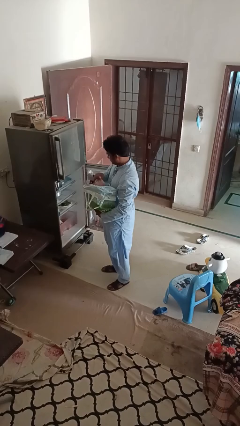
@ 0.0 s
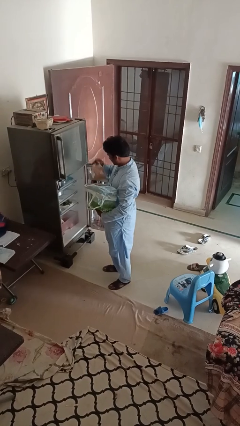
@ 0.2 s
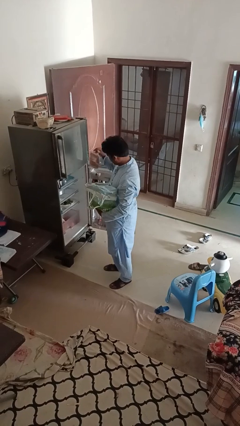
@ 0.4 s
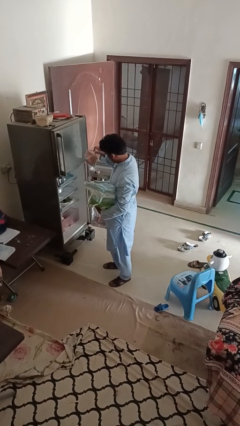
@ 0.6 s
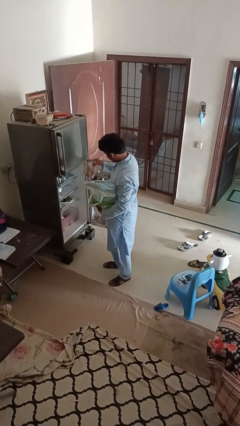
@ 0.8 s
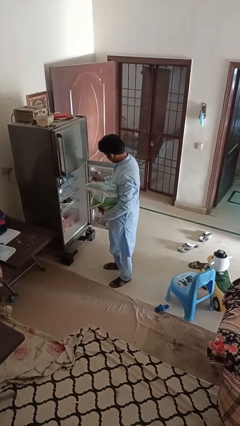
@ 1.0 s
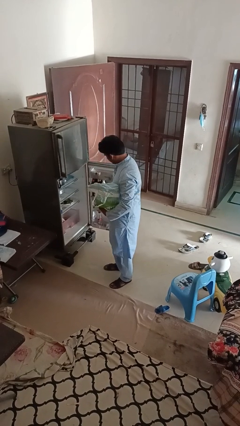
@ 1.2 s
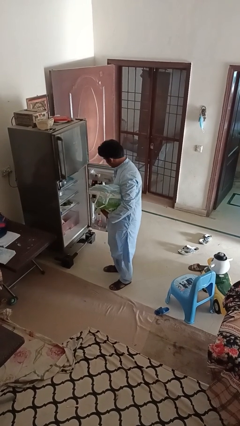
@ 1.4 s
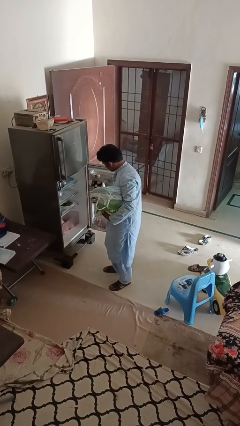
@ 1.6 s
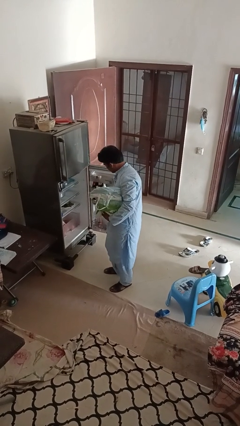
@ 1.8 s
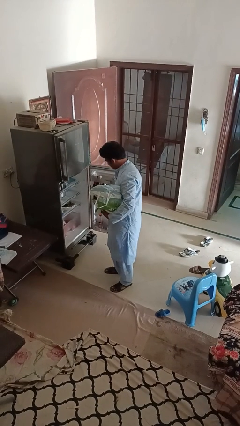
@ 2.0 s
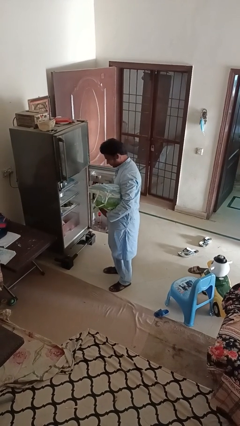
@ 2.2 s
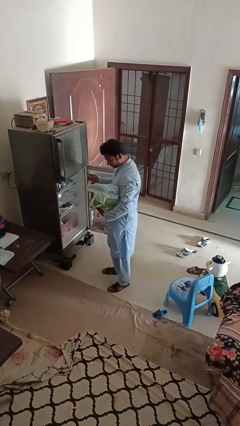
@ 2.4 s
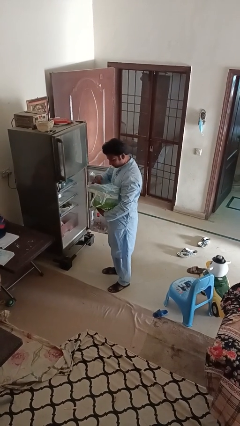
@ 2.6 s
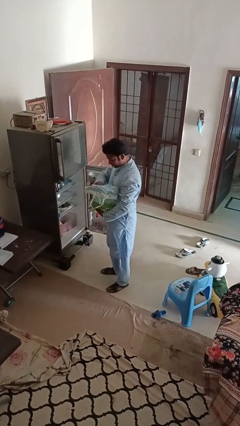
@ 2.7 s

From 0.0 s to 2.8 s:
person loads groceries into refrigerator

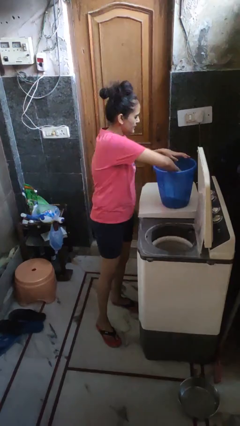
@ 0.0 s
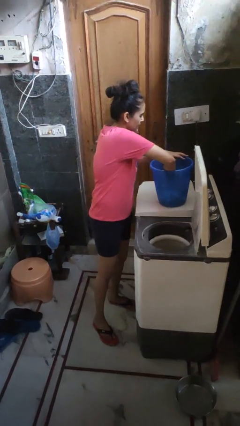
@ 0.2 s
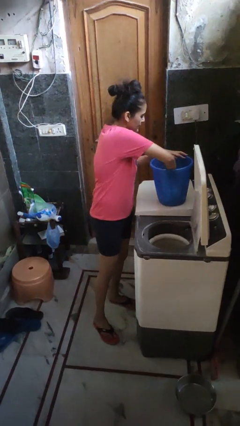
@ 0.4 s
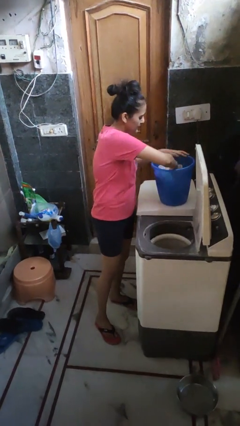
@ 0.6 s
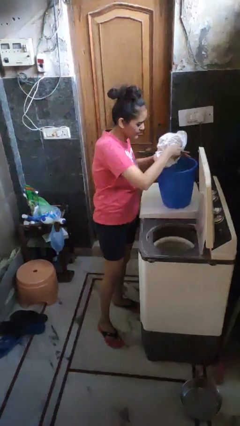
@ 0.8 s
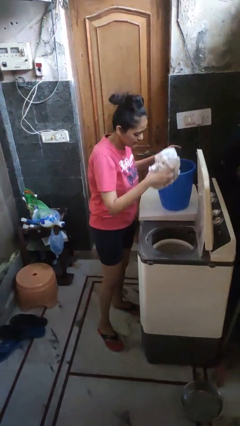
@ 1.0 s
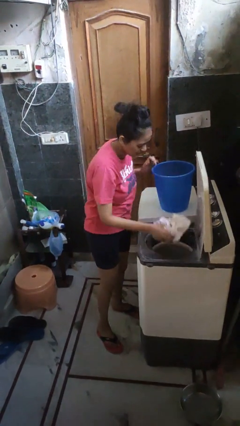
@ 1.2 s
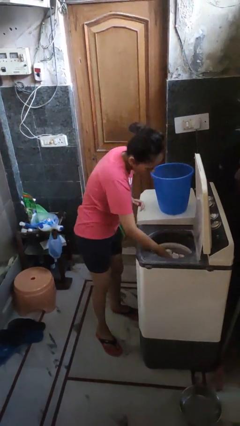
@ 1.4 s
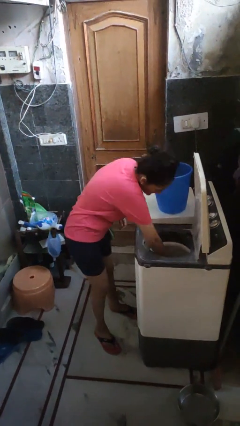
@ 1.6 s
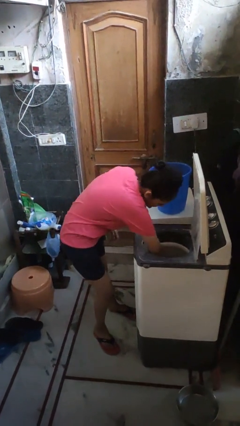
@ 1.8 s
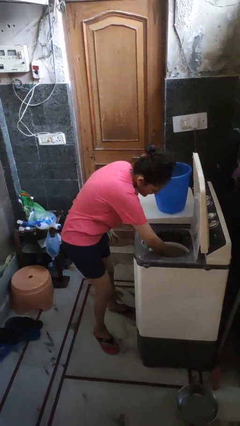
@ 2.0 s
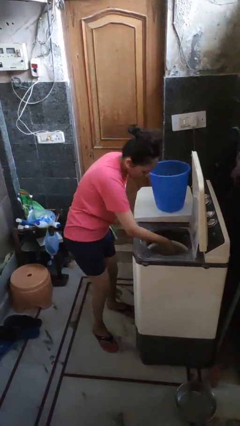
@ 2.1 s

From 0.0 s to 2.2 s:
person puts clothes into dresser

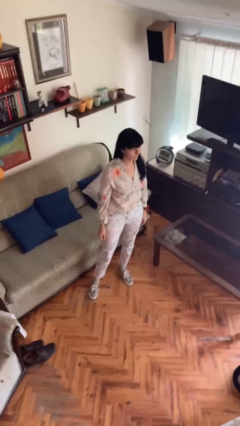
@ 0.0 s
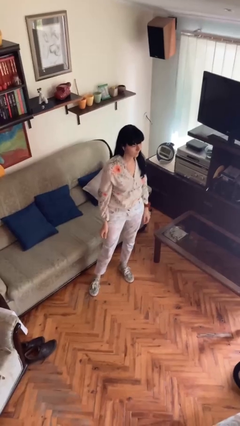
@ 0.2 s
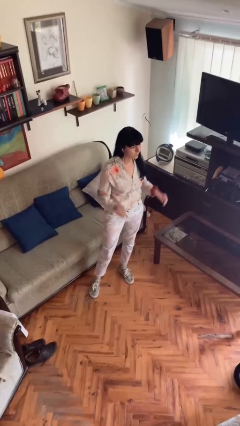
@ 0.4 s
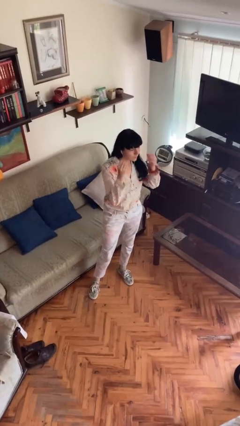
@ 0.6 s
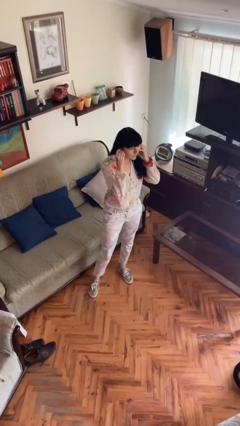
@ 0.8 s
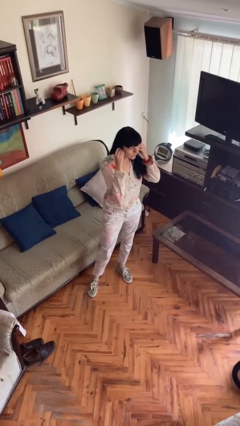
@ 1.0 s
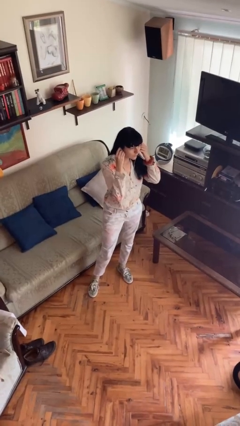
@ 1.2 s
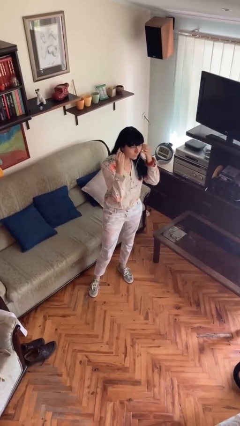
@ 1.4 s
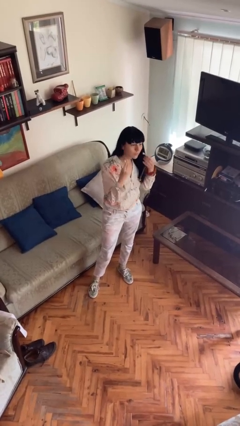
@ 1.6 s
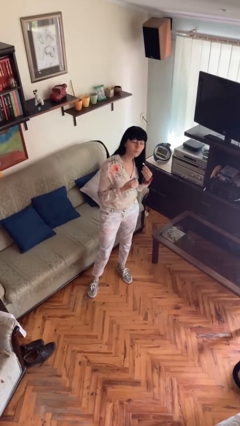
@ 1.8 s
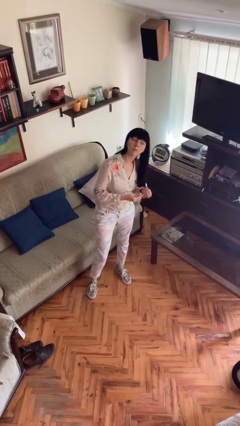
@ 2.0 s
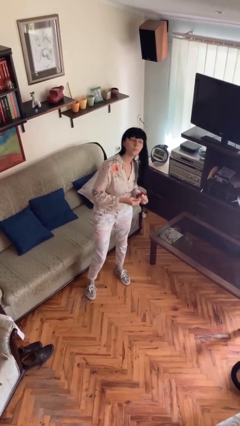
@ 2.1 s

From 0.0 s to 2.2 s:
person takes off headphones

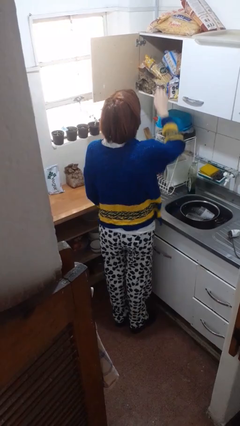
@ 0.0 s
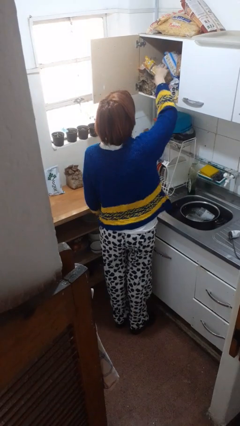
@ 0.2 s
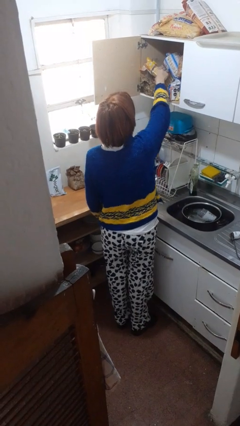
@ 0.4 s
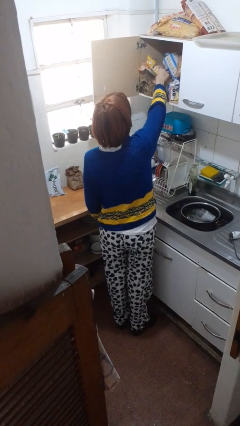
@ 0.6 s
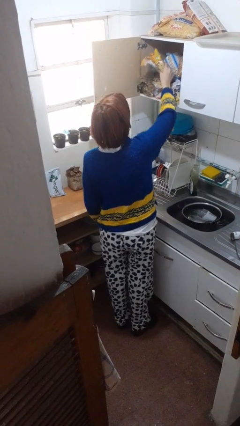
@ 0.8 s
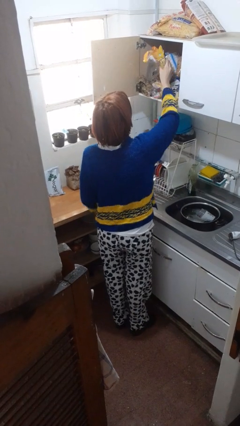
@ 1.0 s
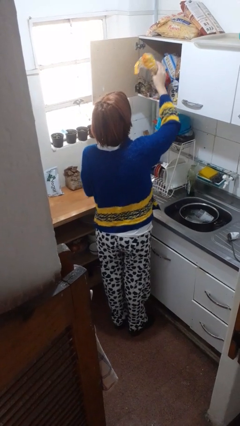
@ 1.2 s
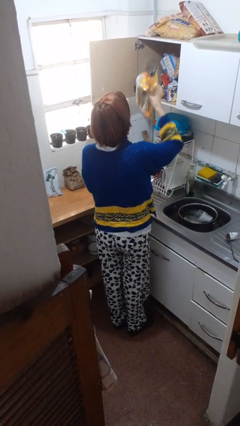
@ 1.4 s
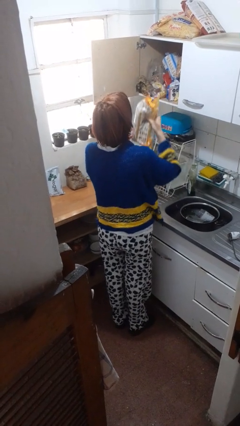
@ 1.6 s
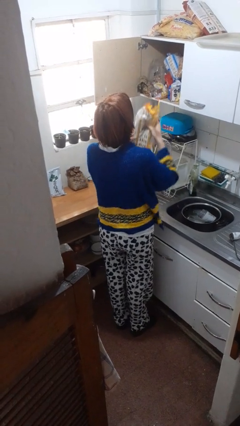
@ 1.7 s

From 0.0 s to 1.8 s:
person takes object from cabinet

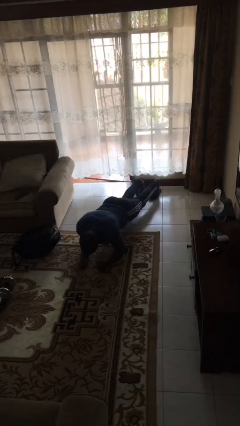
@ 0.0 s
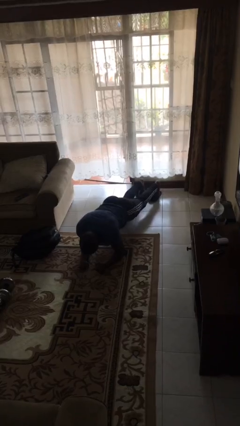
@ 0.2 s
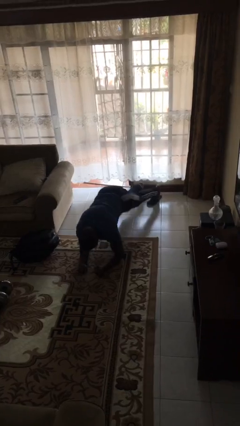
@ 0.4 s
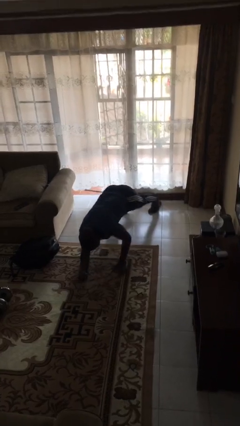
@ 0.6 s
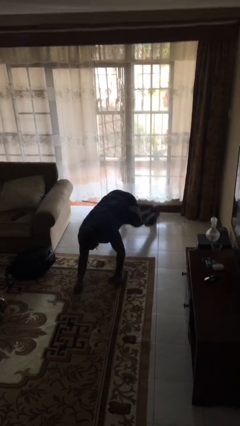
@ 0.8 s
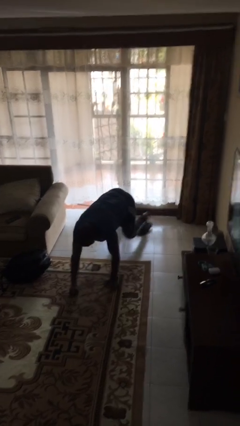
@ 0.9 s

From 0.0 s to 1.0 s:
person stands up from floor

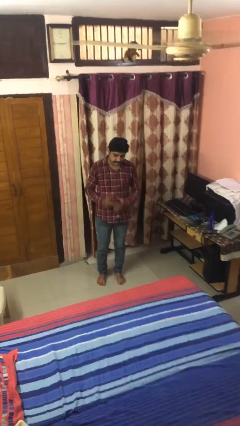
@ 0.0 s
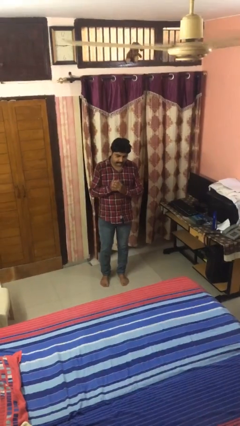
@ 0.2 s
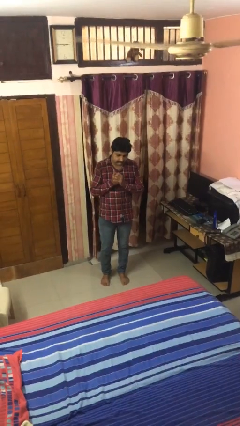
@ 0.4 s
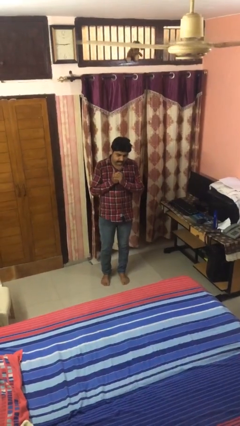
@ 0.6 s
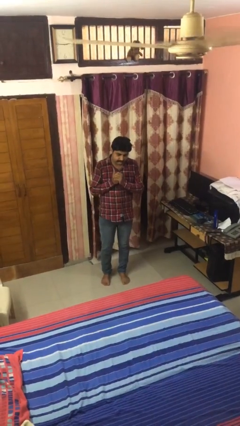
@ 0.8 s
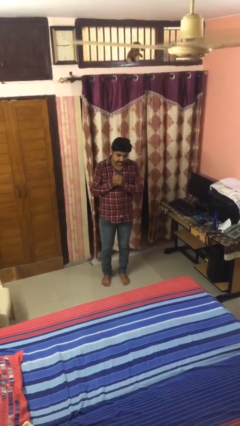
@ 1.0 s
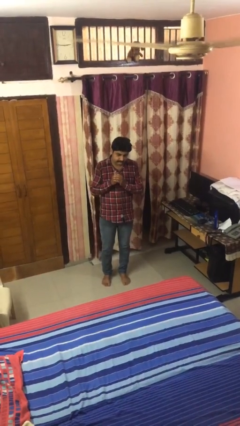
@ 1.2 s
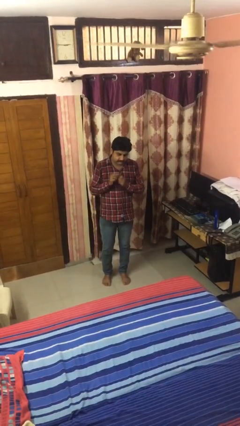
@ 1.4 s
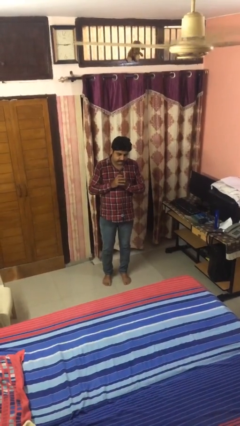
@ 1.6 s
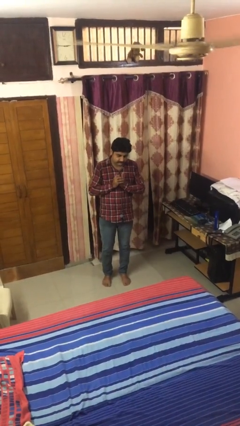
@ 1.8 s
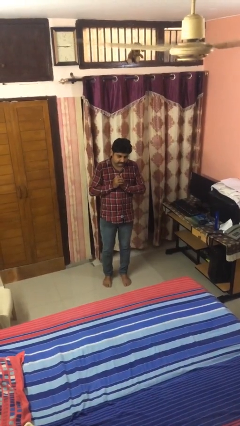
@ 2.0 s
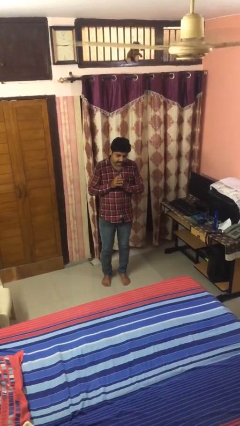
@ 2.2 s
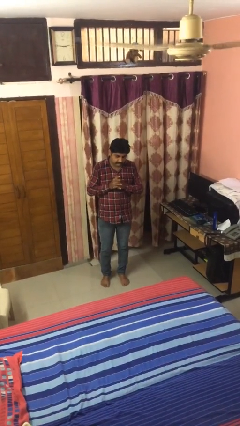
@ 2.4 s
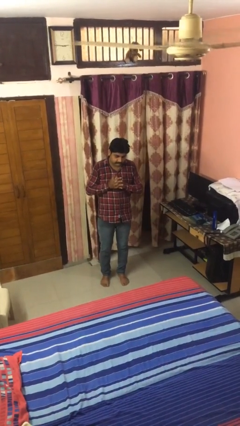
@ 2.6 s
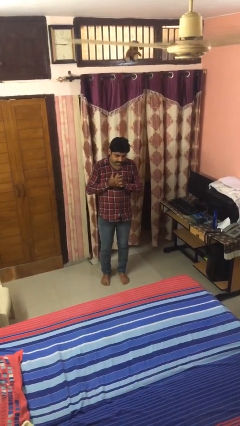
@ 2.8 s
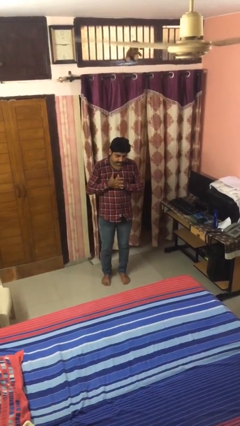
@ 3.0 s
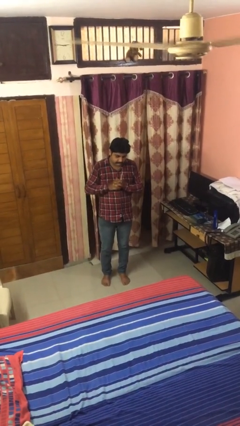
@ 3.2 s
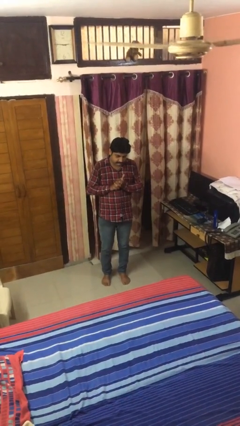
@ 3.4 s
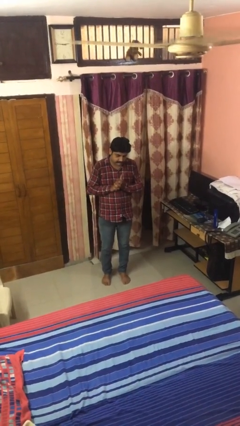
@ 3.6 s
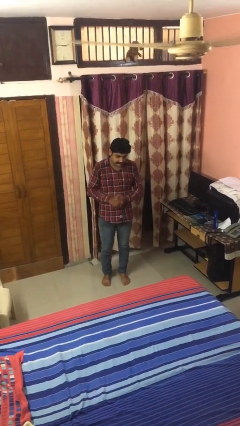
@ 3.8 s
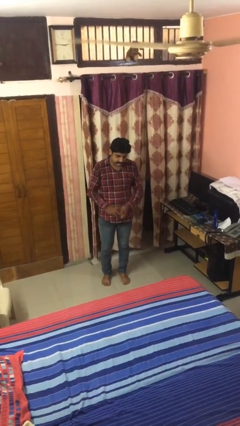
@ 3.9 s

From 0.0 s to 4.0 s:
person cracks knuckles

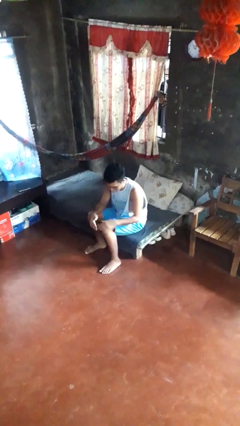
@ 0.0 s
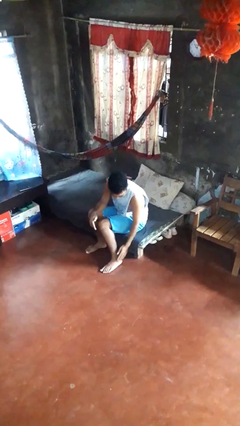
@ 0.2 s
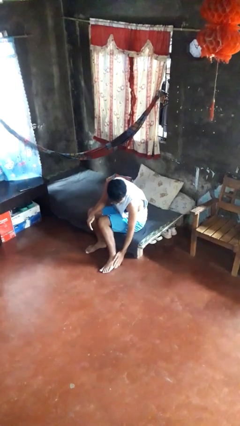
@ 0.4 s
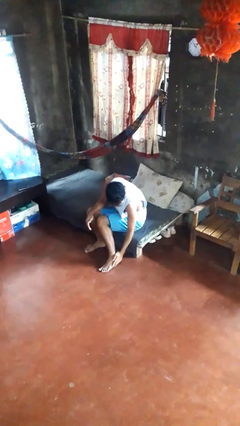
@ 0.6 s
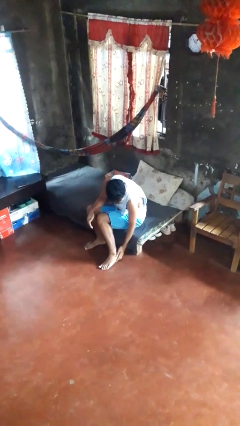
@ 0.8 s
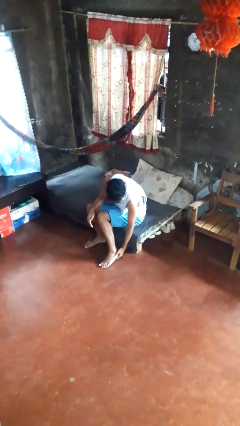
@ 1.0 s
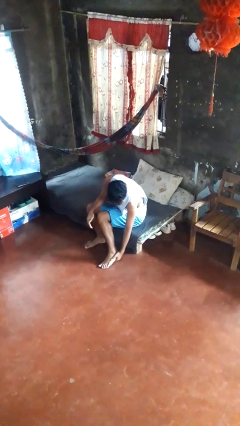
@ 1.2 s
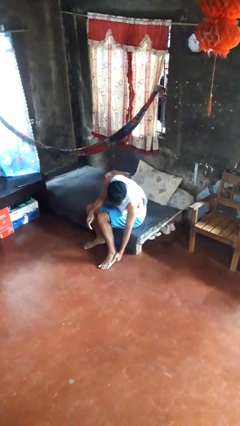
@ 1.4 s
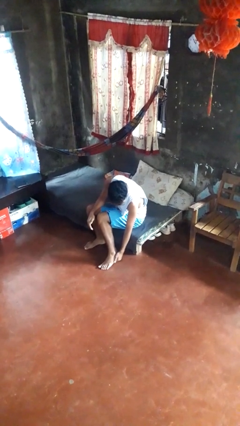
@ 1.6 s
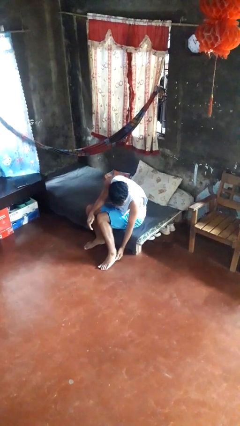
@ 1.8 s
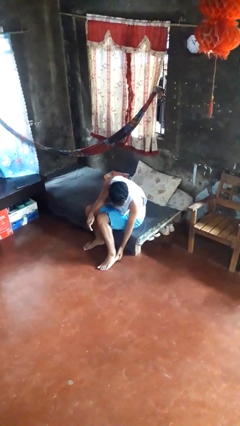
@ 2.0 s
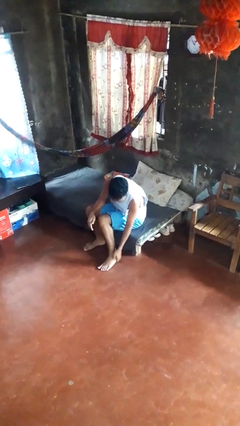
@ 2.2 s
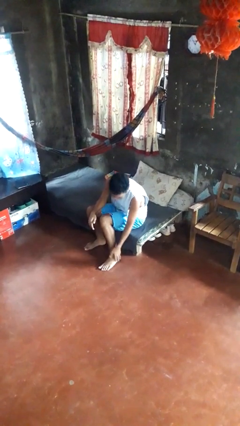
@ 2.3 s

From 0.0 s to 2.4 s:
person rubs foot
